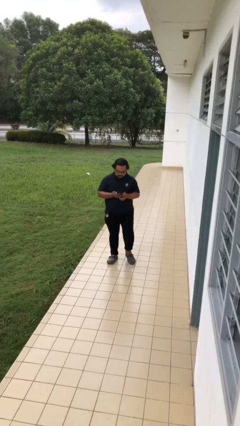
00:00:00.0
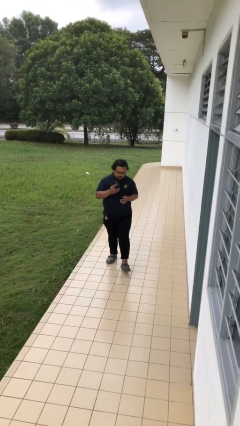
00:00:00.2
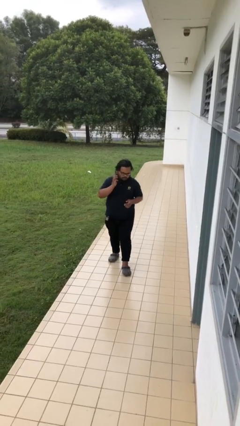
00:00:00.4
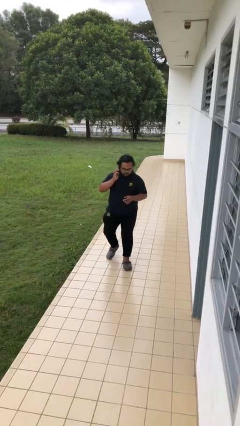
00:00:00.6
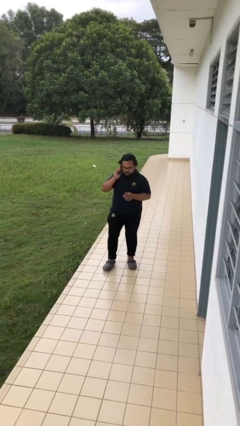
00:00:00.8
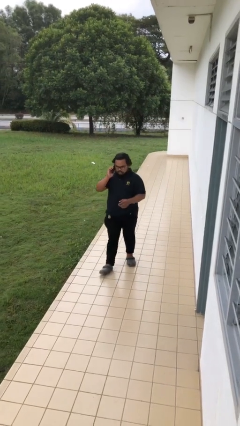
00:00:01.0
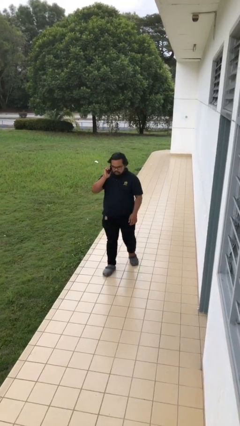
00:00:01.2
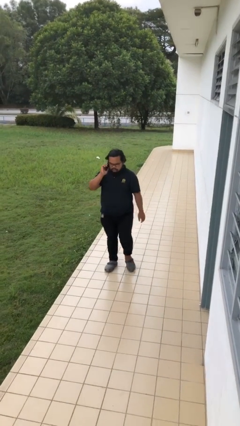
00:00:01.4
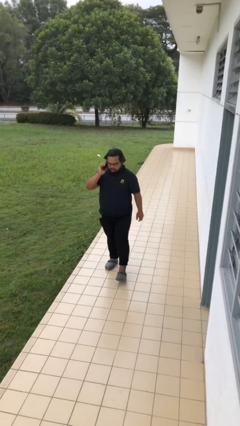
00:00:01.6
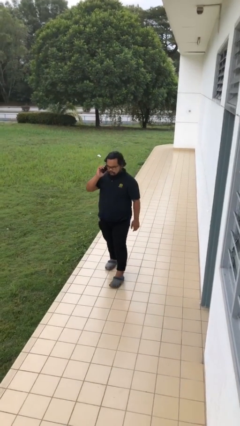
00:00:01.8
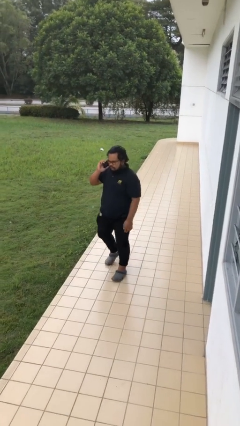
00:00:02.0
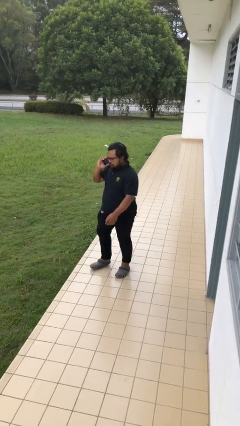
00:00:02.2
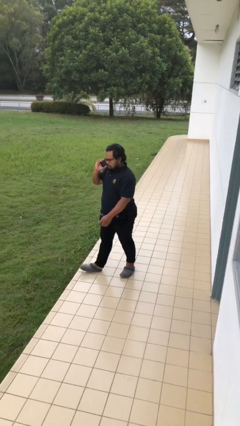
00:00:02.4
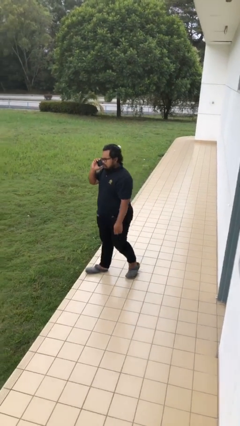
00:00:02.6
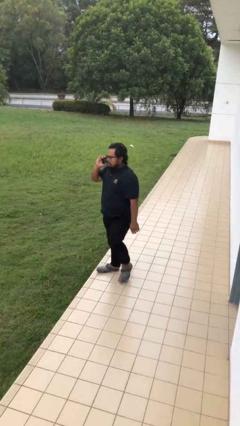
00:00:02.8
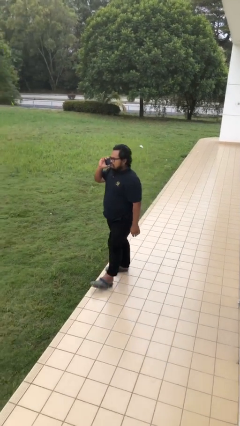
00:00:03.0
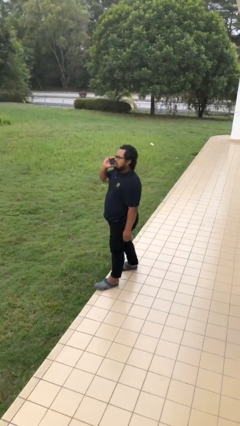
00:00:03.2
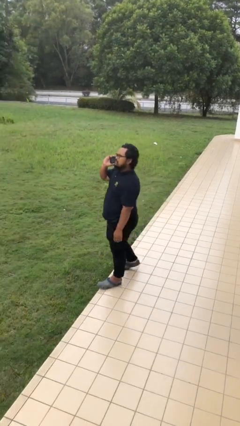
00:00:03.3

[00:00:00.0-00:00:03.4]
person talks on phone

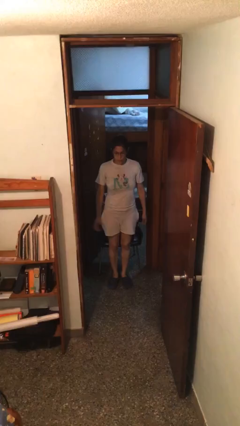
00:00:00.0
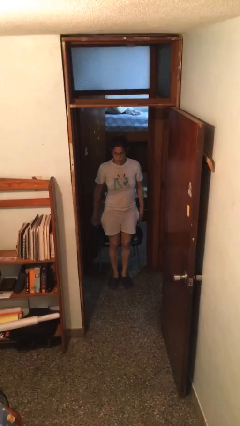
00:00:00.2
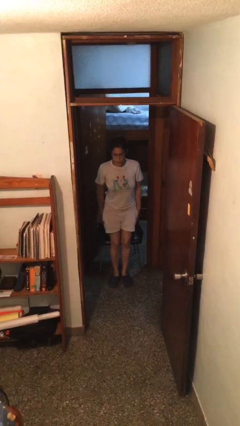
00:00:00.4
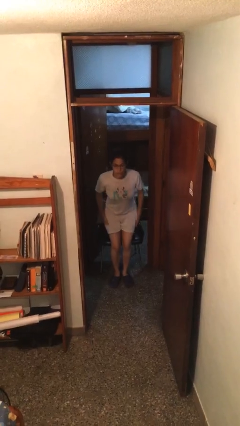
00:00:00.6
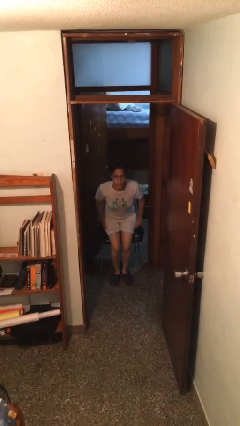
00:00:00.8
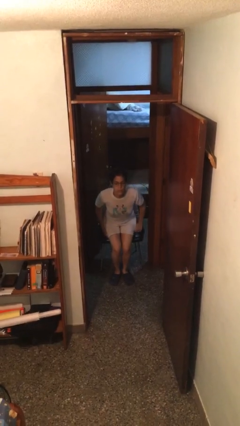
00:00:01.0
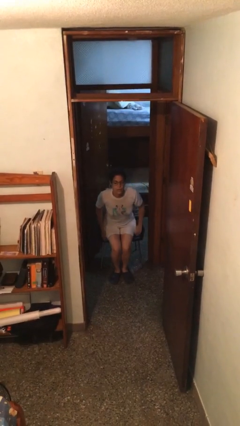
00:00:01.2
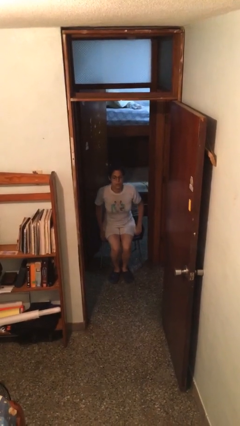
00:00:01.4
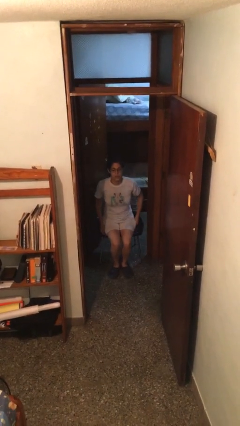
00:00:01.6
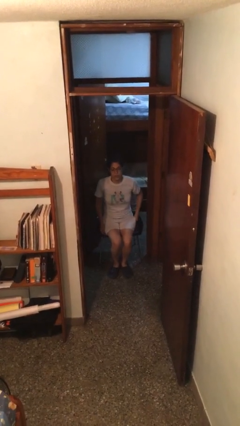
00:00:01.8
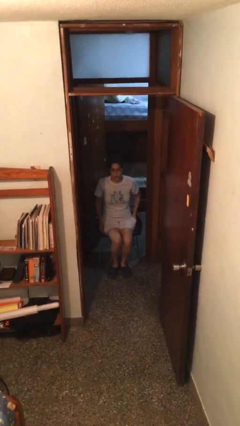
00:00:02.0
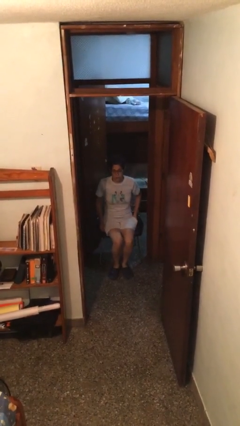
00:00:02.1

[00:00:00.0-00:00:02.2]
person sits down

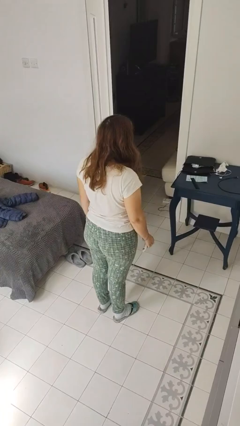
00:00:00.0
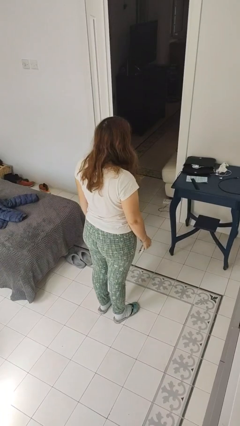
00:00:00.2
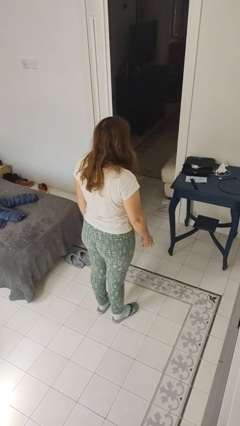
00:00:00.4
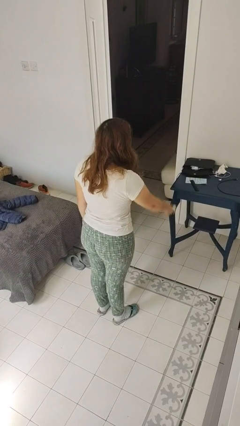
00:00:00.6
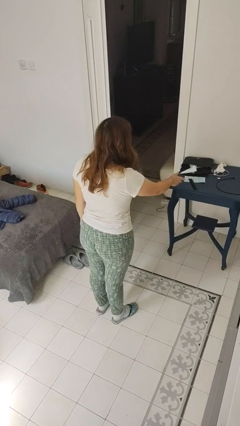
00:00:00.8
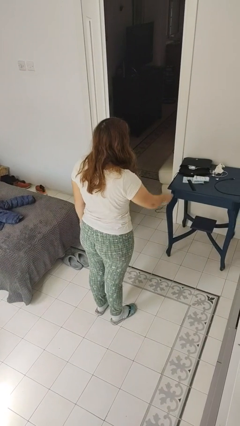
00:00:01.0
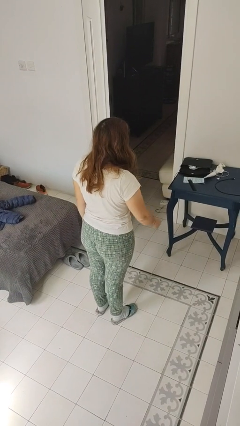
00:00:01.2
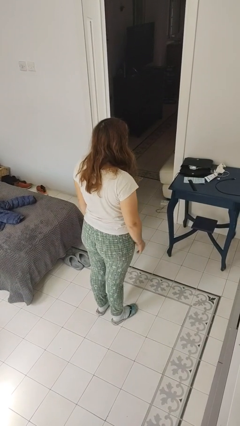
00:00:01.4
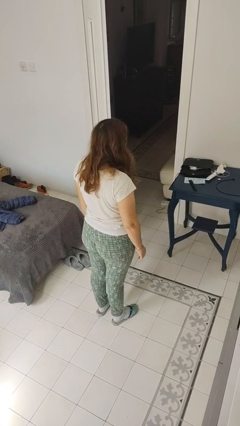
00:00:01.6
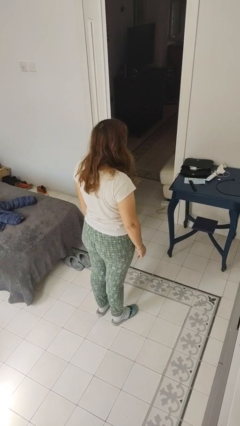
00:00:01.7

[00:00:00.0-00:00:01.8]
person throws object on table

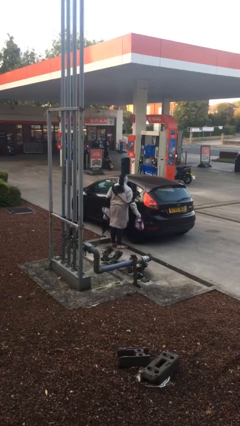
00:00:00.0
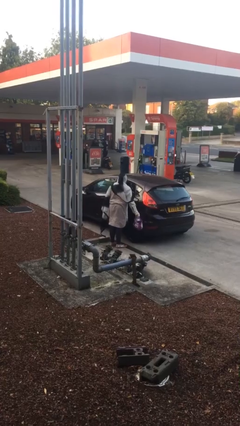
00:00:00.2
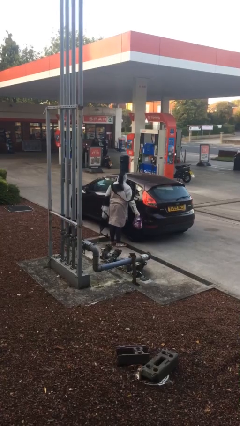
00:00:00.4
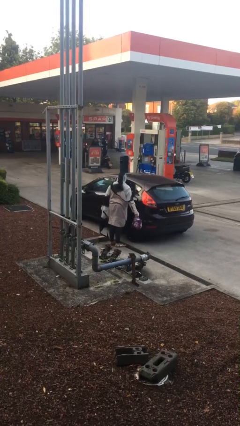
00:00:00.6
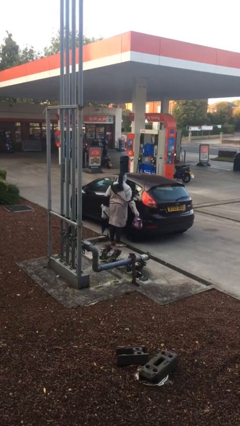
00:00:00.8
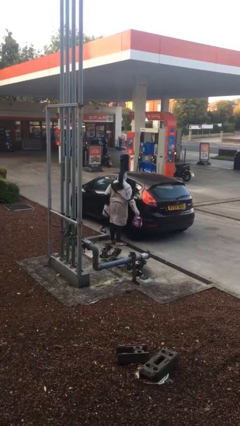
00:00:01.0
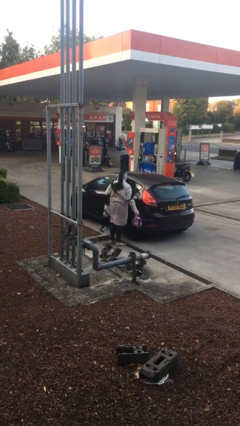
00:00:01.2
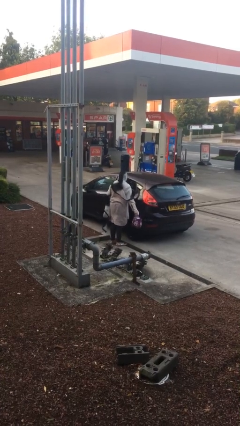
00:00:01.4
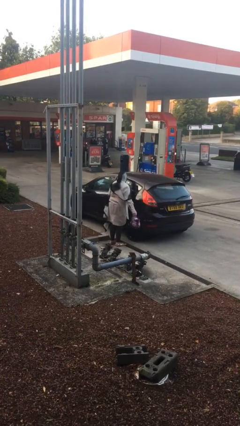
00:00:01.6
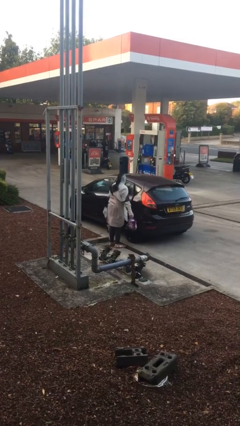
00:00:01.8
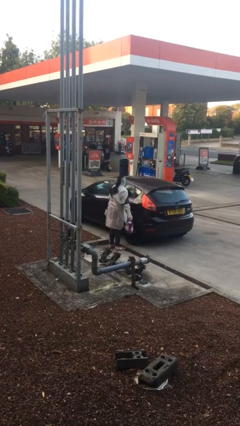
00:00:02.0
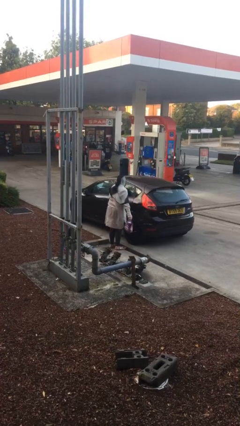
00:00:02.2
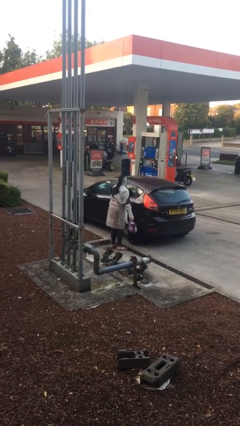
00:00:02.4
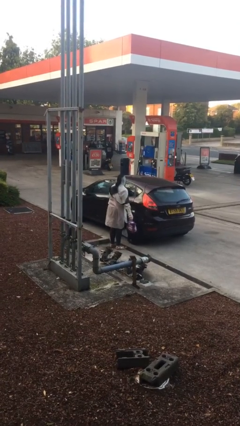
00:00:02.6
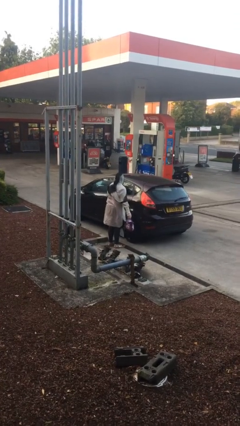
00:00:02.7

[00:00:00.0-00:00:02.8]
person closes car door

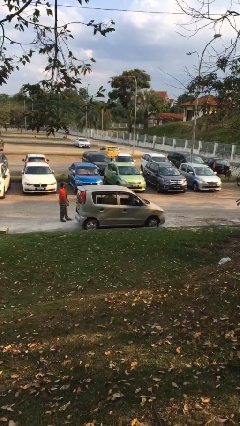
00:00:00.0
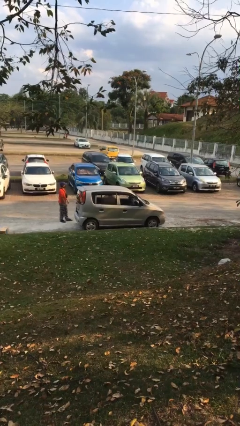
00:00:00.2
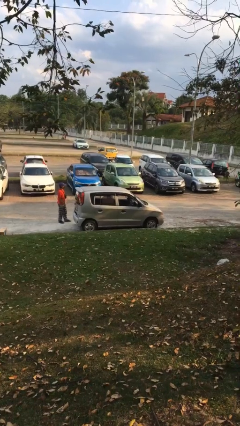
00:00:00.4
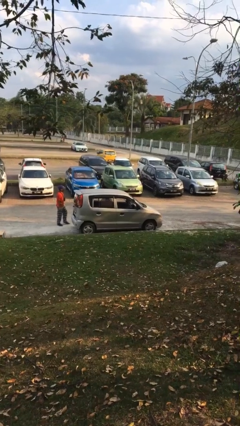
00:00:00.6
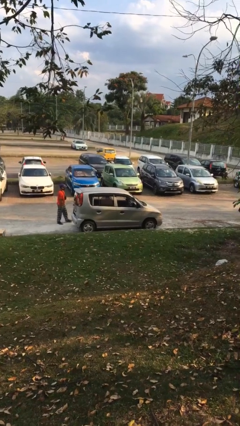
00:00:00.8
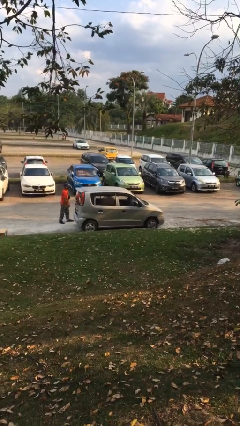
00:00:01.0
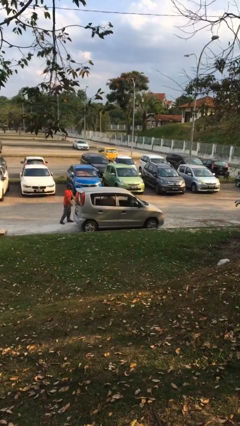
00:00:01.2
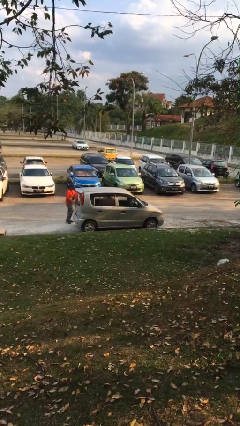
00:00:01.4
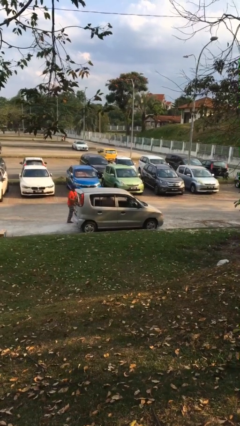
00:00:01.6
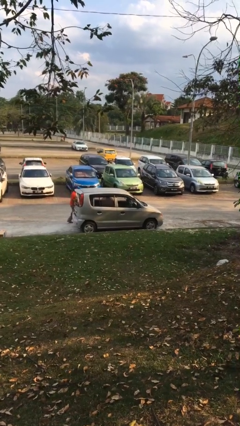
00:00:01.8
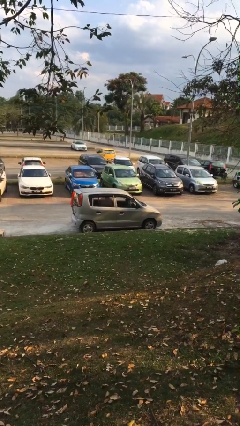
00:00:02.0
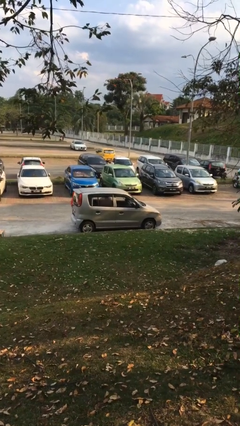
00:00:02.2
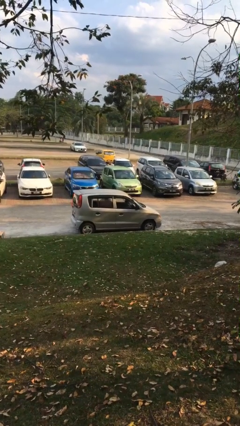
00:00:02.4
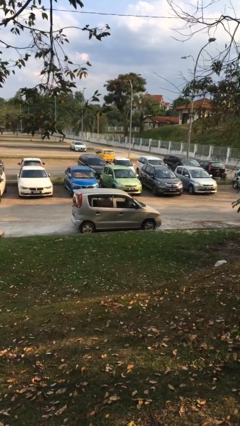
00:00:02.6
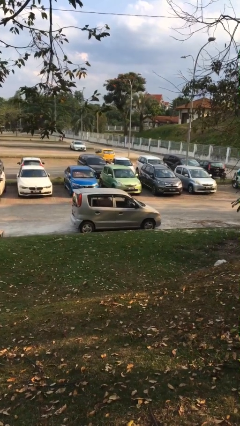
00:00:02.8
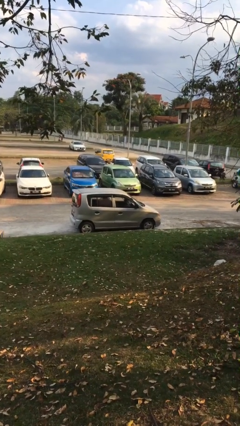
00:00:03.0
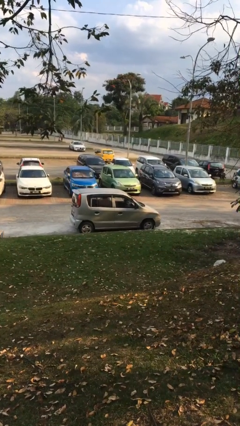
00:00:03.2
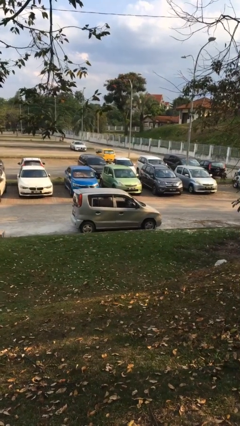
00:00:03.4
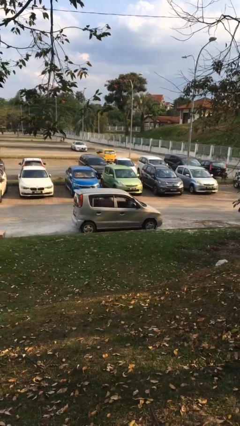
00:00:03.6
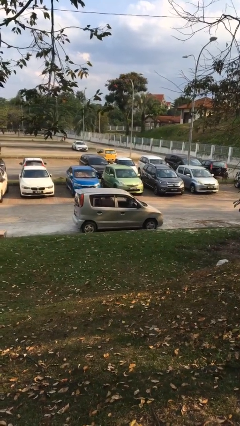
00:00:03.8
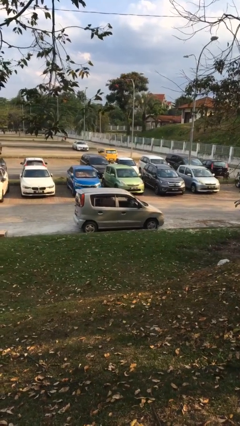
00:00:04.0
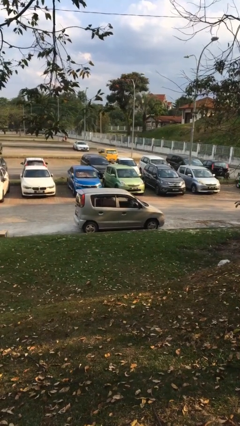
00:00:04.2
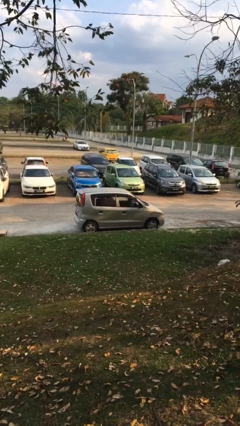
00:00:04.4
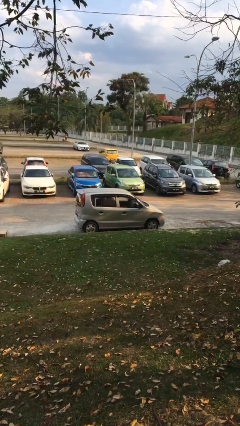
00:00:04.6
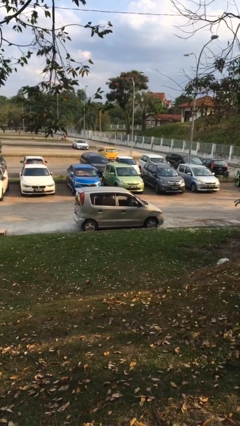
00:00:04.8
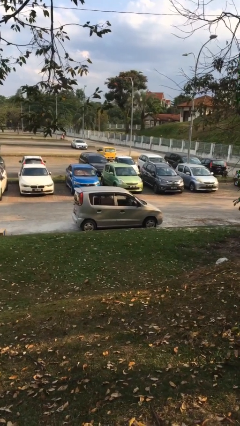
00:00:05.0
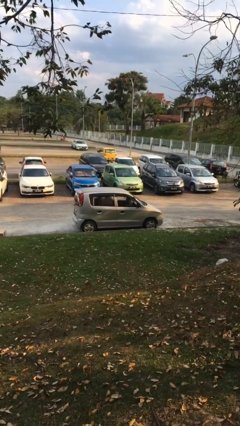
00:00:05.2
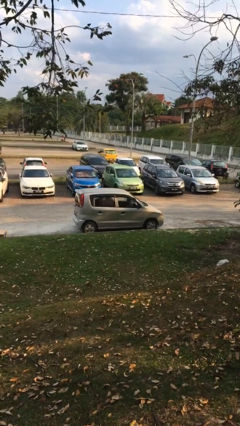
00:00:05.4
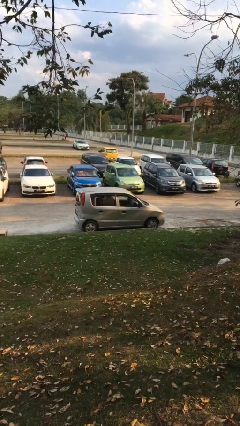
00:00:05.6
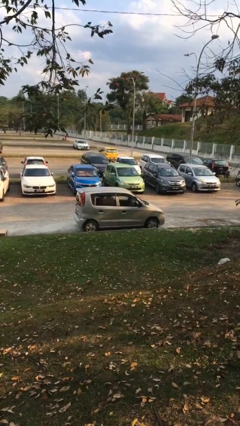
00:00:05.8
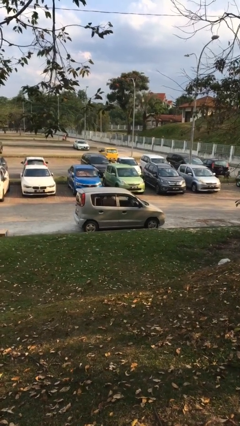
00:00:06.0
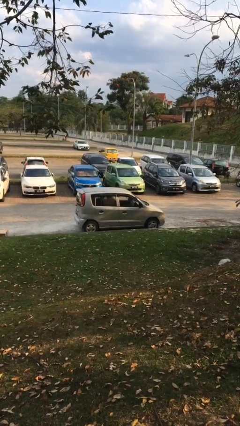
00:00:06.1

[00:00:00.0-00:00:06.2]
car picks up person

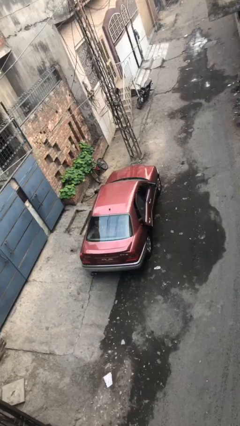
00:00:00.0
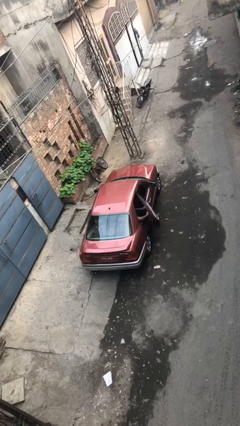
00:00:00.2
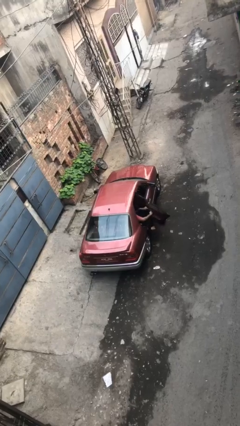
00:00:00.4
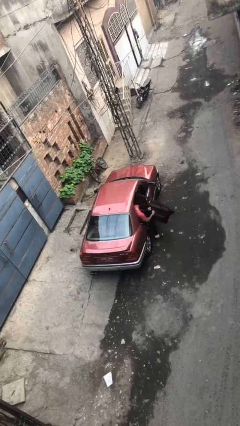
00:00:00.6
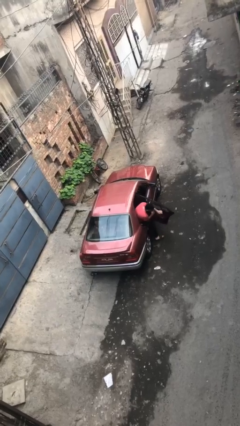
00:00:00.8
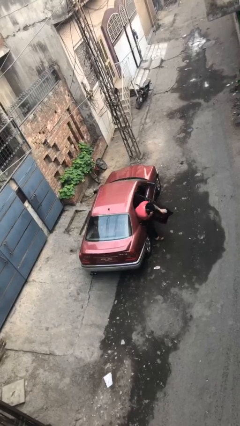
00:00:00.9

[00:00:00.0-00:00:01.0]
car drops off person

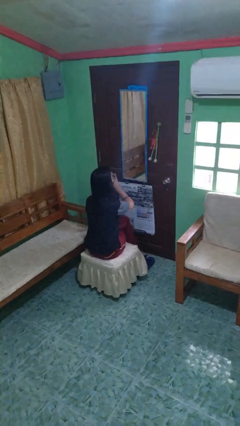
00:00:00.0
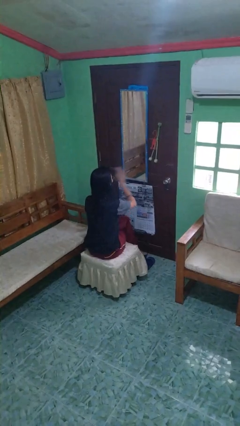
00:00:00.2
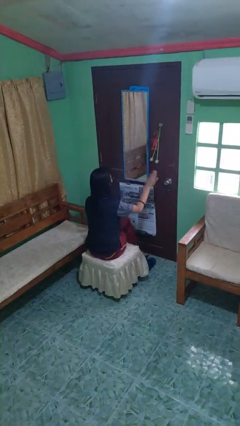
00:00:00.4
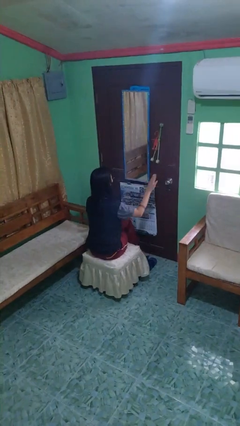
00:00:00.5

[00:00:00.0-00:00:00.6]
person gestures swipe left
